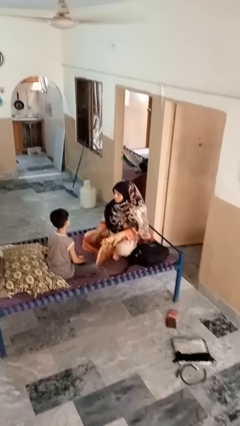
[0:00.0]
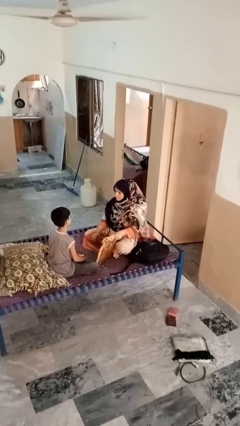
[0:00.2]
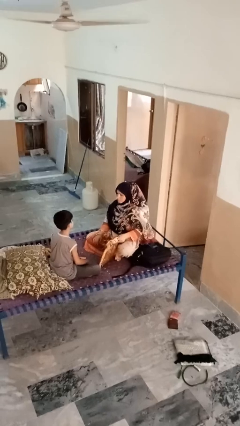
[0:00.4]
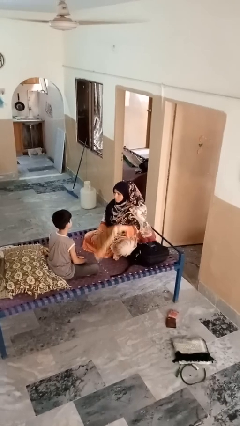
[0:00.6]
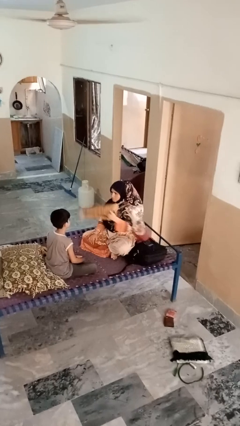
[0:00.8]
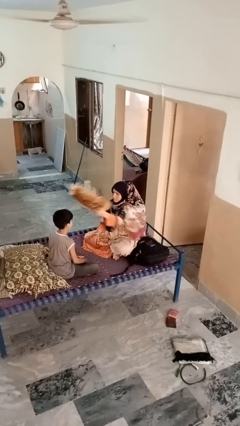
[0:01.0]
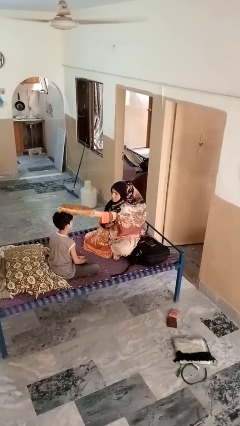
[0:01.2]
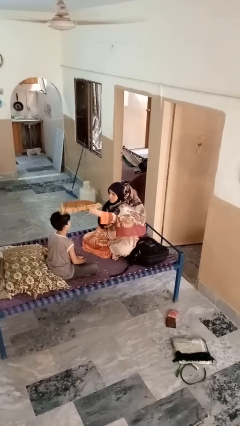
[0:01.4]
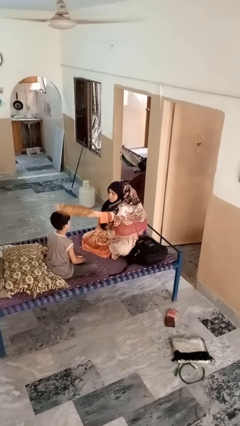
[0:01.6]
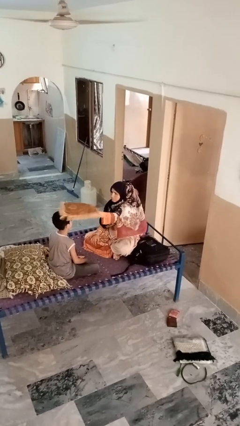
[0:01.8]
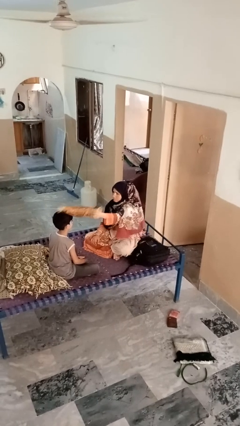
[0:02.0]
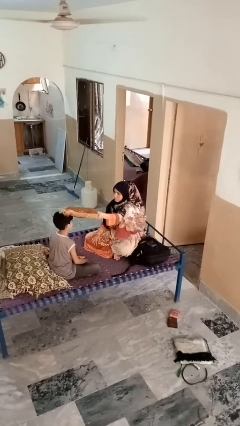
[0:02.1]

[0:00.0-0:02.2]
person hits person with pillow

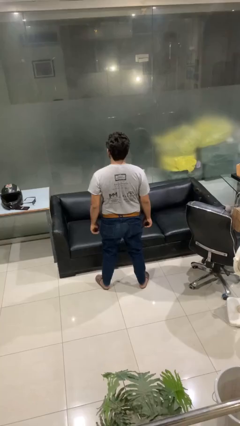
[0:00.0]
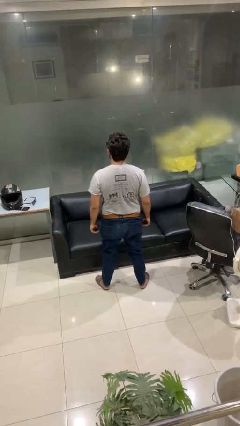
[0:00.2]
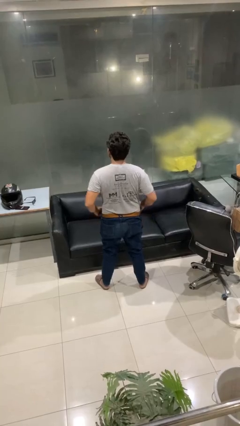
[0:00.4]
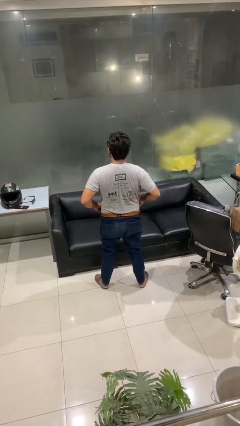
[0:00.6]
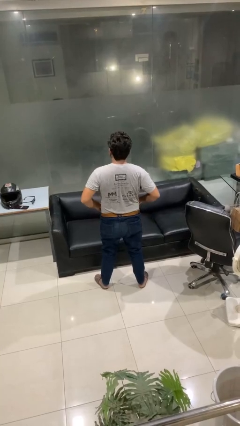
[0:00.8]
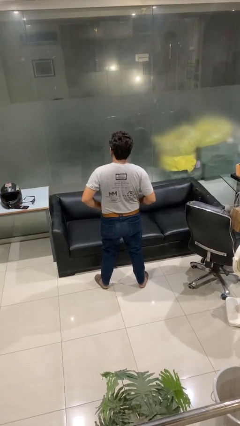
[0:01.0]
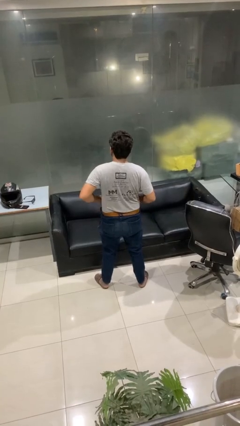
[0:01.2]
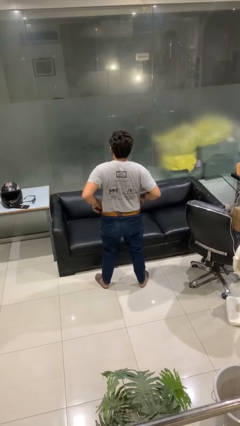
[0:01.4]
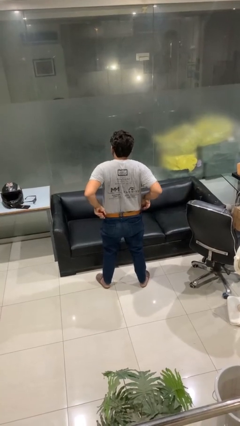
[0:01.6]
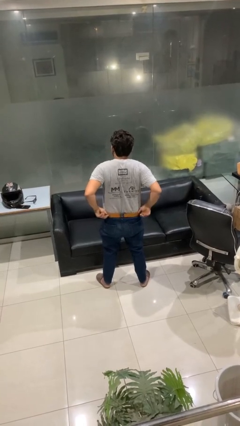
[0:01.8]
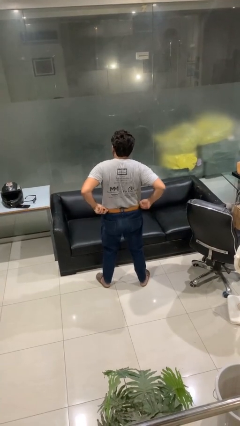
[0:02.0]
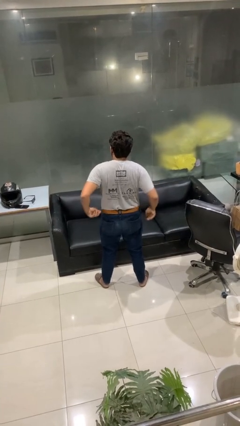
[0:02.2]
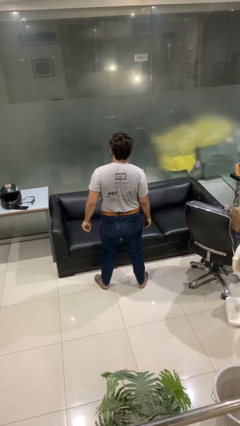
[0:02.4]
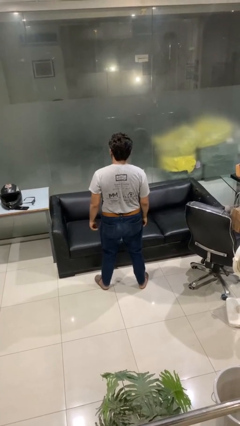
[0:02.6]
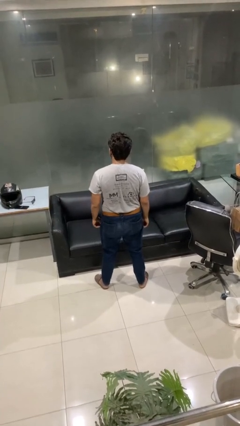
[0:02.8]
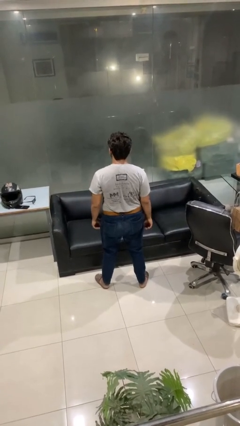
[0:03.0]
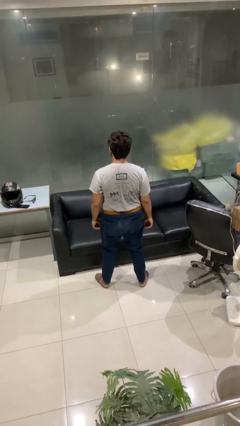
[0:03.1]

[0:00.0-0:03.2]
person hikes up pants

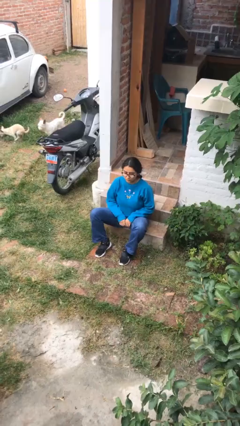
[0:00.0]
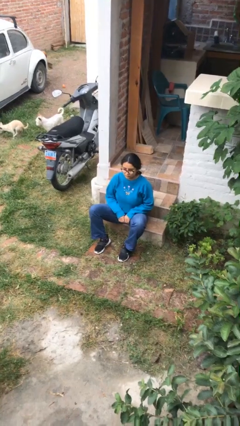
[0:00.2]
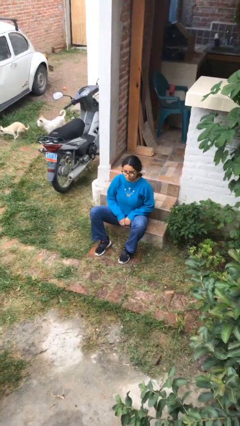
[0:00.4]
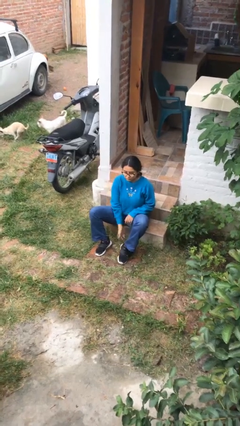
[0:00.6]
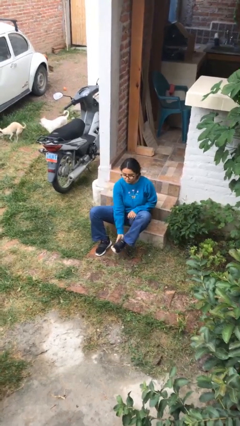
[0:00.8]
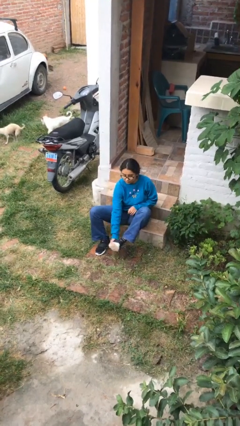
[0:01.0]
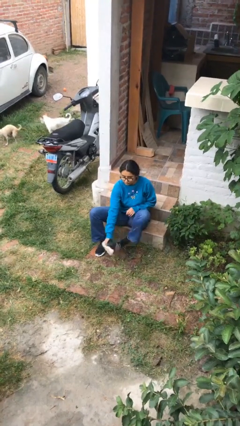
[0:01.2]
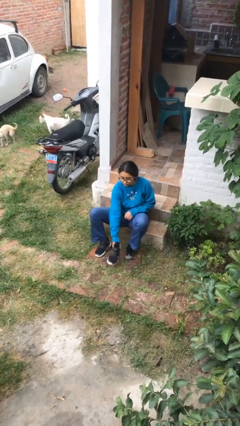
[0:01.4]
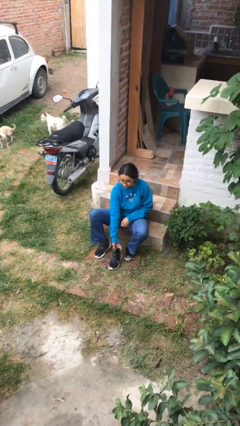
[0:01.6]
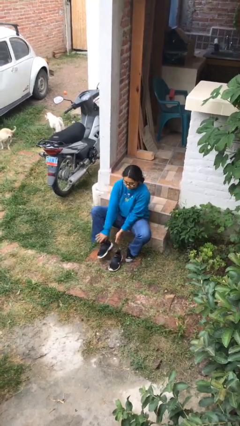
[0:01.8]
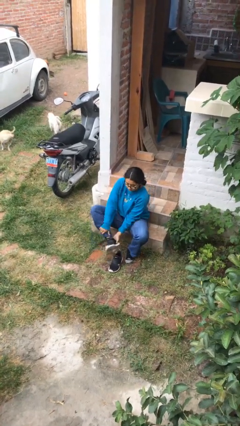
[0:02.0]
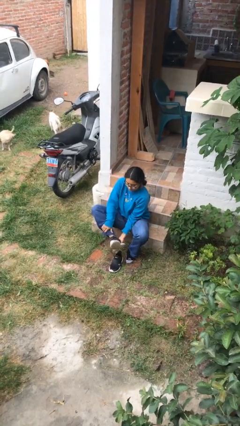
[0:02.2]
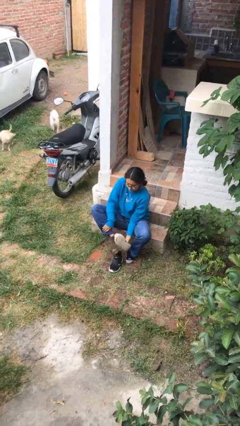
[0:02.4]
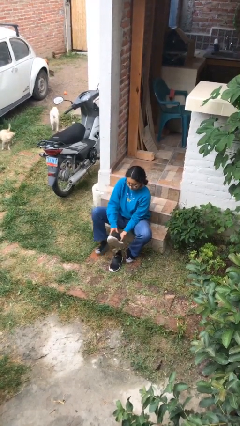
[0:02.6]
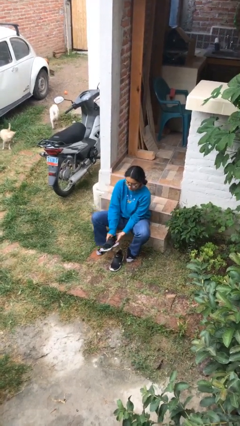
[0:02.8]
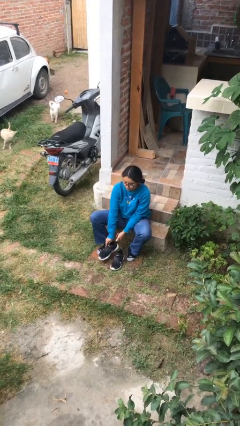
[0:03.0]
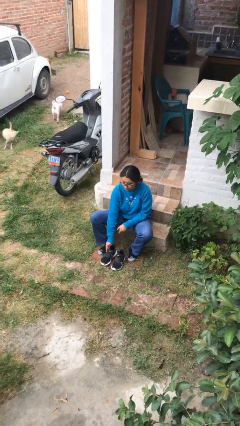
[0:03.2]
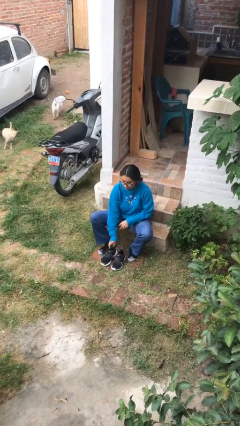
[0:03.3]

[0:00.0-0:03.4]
person takes off shoes

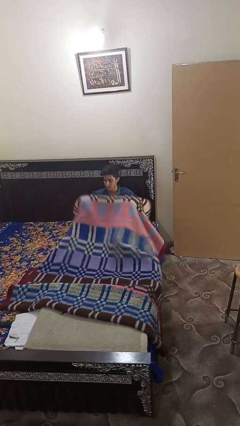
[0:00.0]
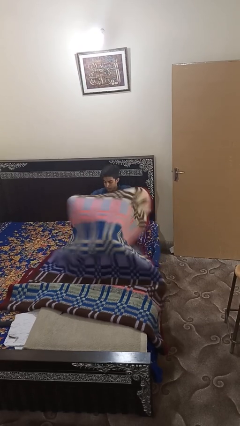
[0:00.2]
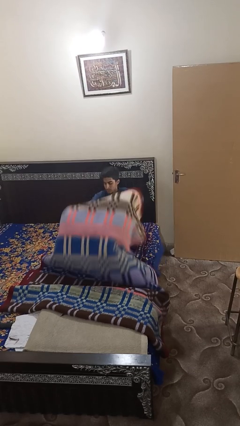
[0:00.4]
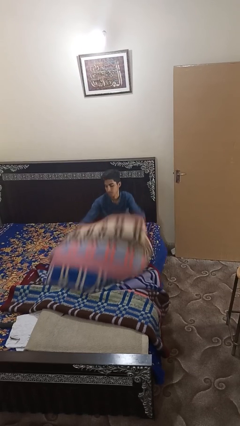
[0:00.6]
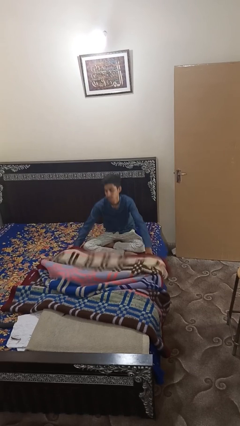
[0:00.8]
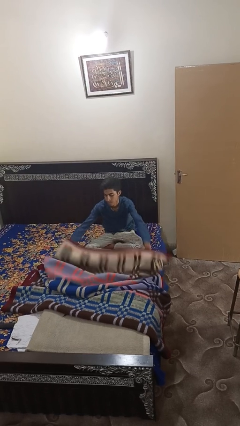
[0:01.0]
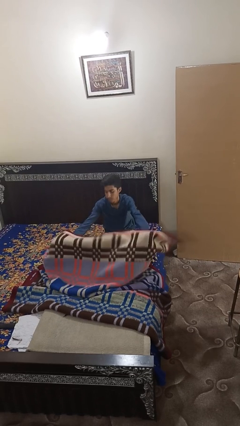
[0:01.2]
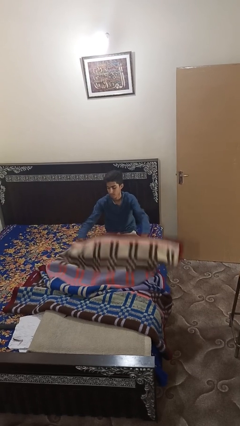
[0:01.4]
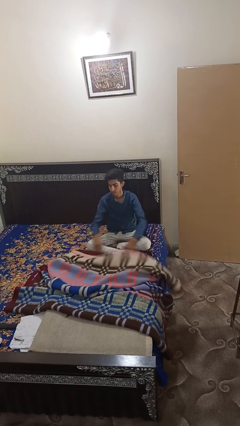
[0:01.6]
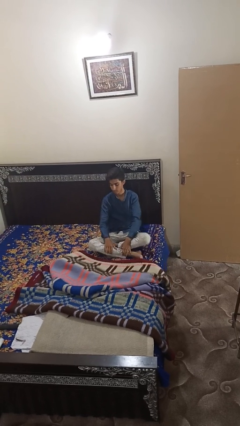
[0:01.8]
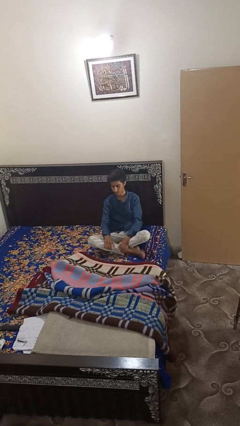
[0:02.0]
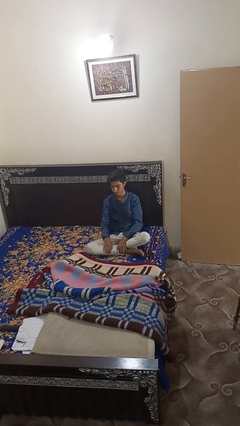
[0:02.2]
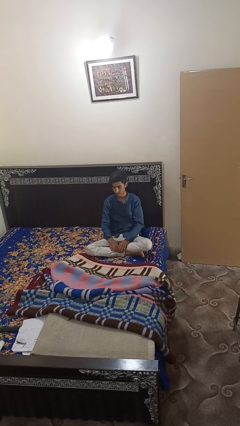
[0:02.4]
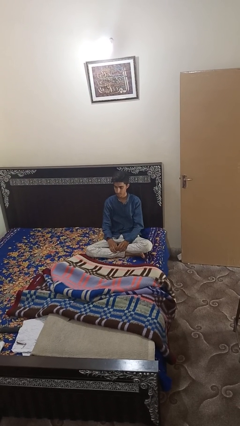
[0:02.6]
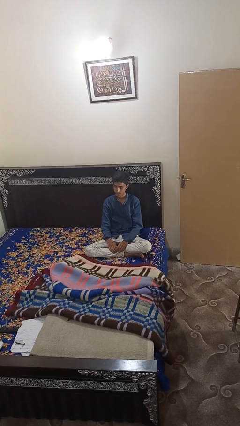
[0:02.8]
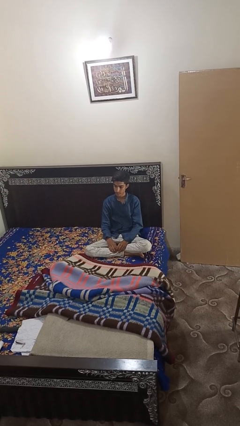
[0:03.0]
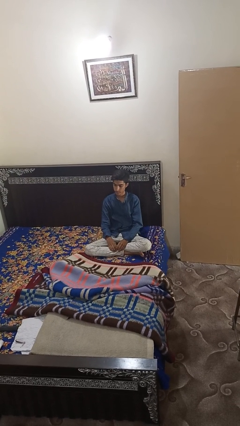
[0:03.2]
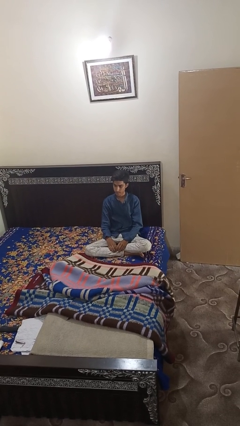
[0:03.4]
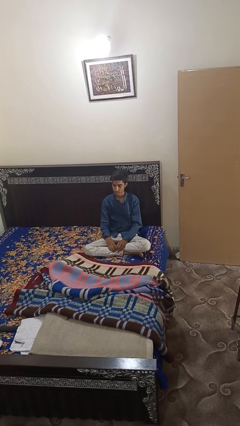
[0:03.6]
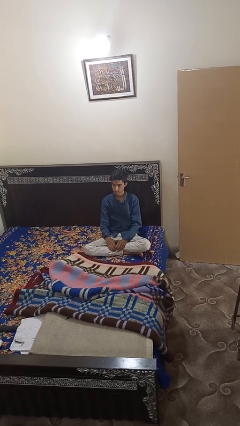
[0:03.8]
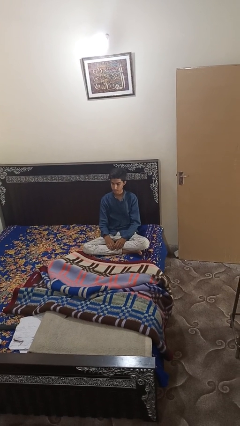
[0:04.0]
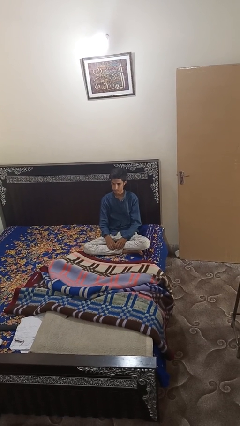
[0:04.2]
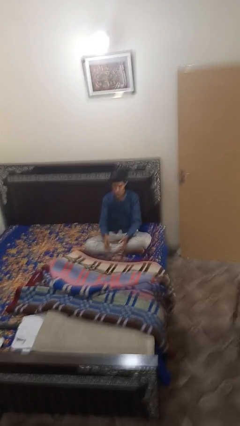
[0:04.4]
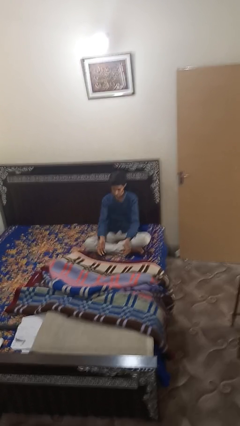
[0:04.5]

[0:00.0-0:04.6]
person uncovers with blanket

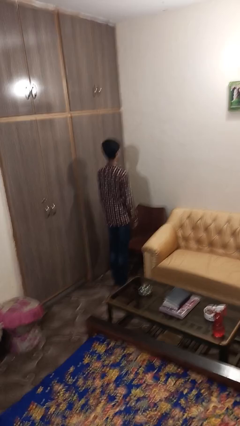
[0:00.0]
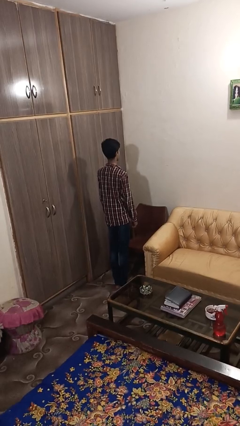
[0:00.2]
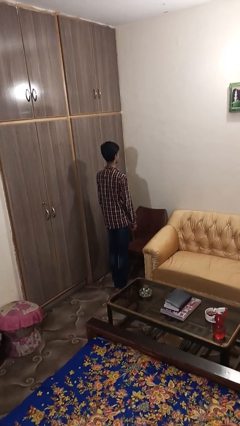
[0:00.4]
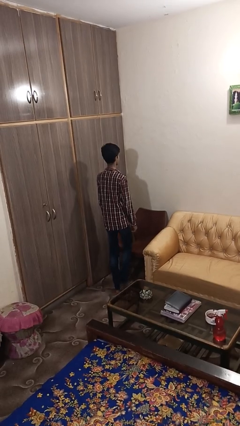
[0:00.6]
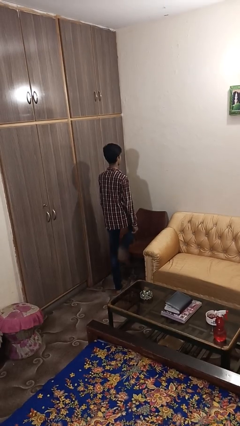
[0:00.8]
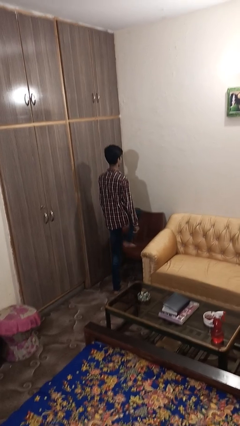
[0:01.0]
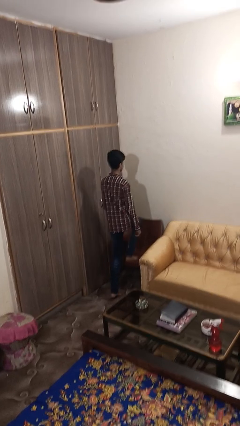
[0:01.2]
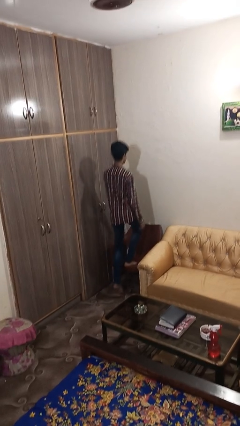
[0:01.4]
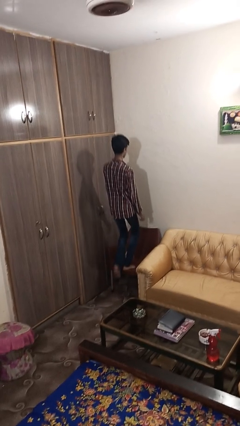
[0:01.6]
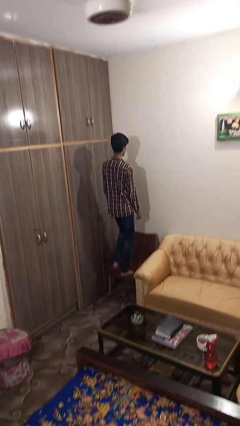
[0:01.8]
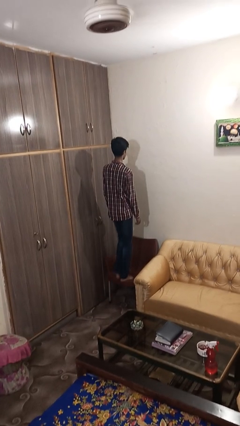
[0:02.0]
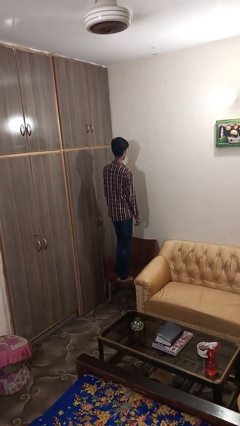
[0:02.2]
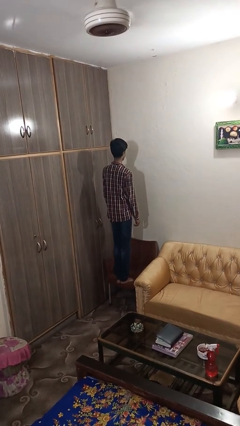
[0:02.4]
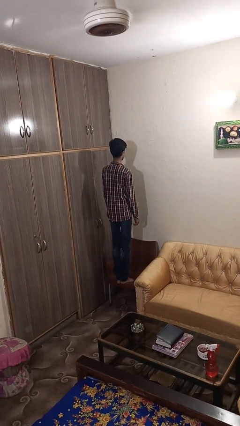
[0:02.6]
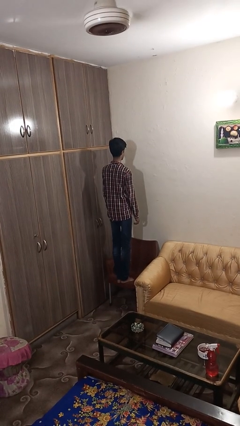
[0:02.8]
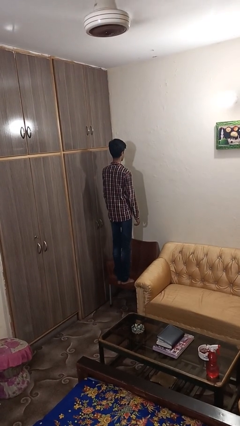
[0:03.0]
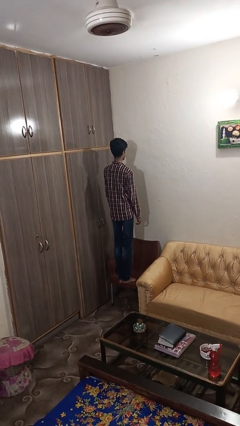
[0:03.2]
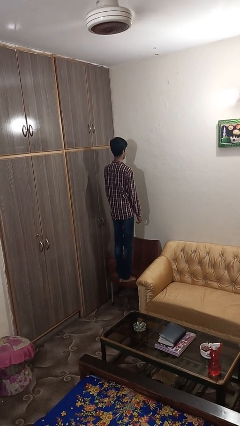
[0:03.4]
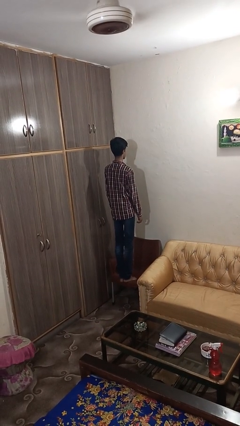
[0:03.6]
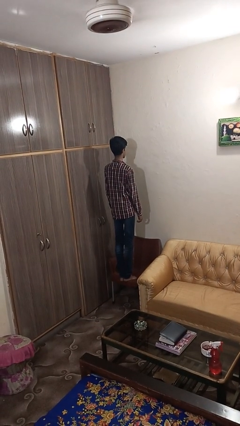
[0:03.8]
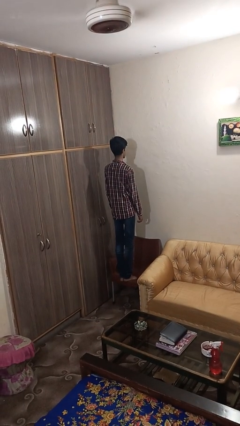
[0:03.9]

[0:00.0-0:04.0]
person climbs on chair
